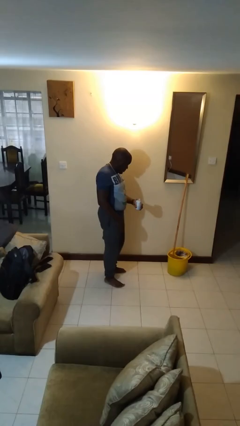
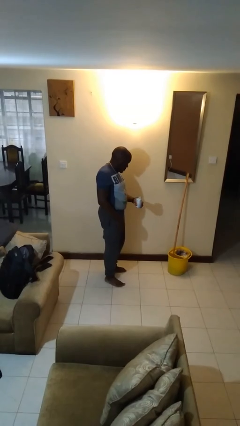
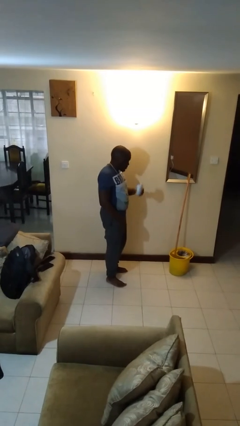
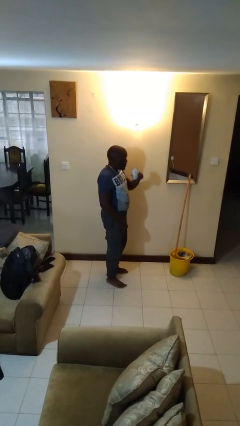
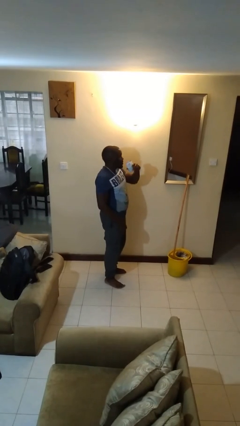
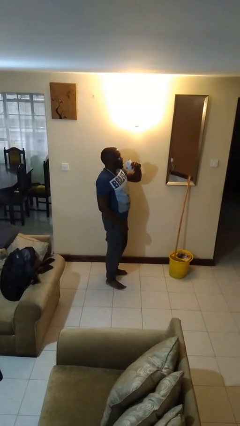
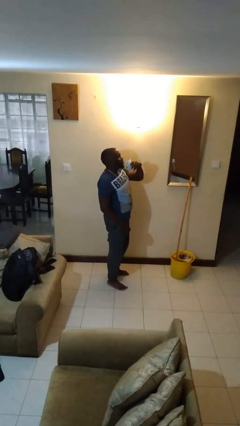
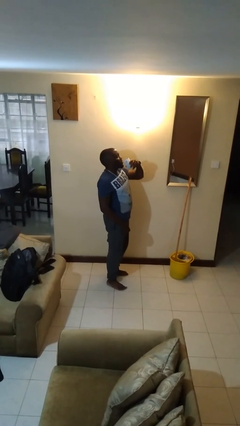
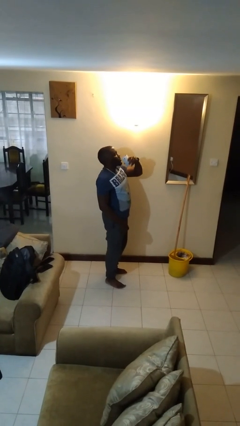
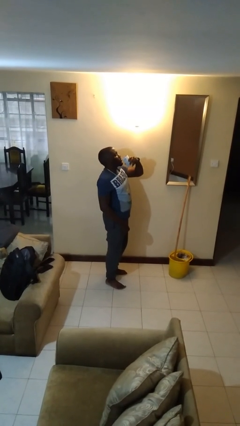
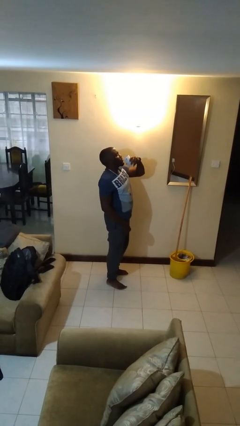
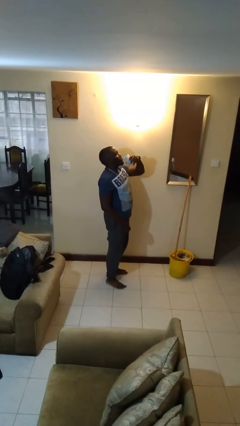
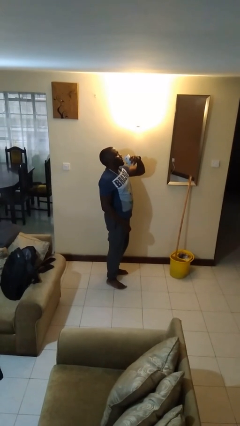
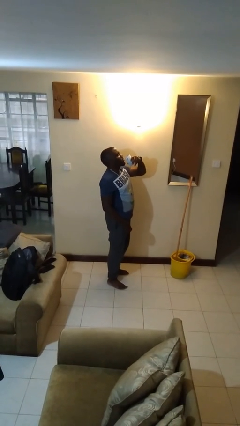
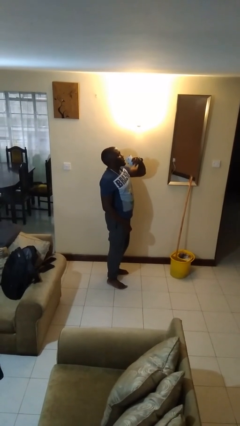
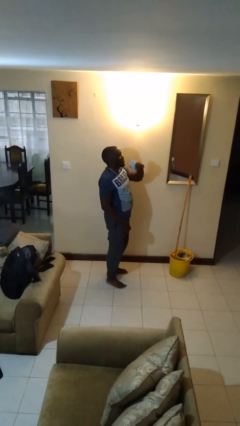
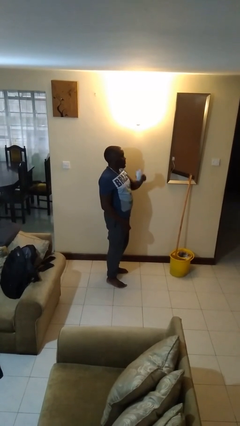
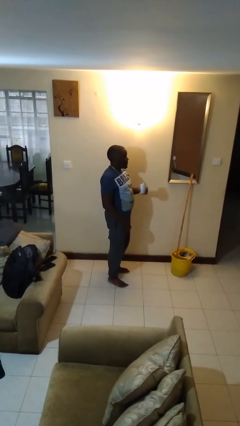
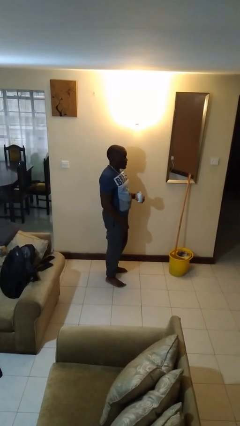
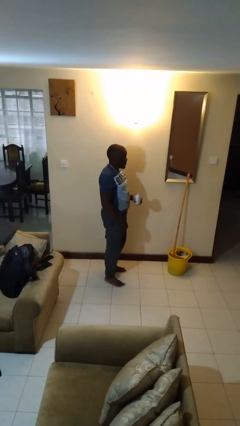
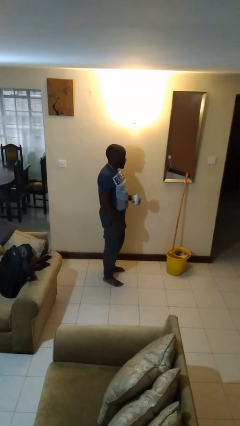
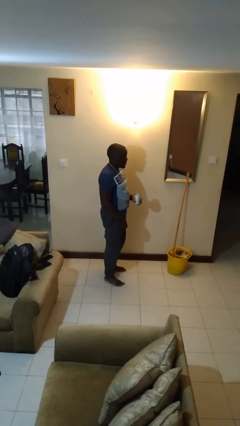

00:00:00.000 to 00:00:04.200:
person drinks from beverage can

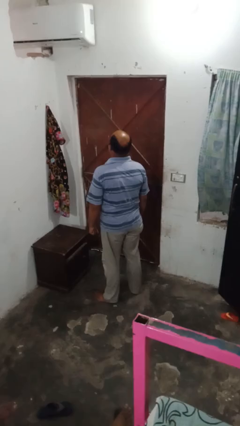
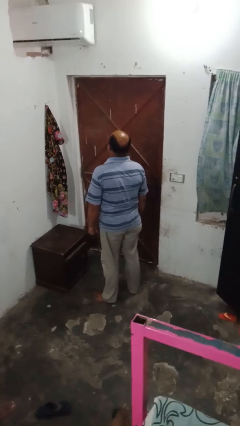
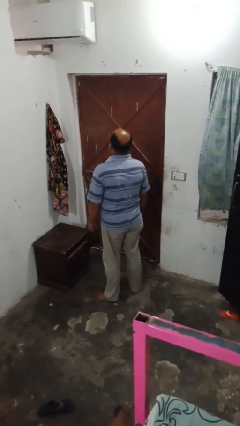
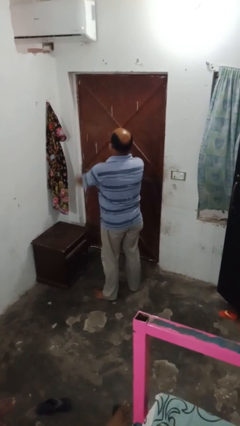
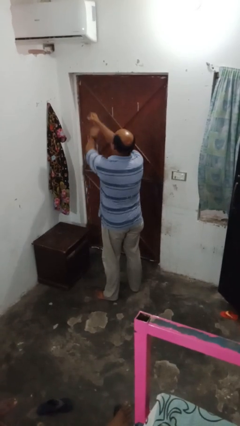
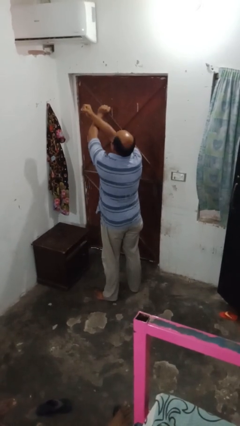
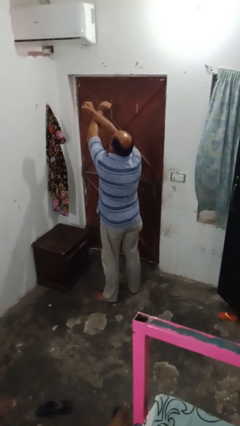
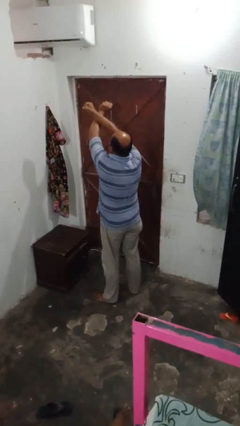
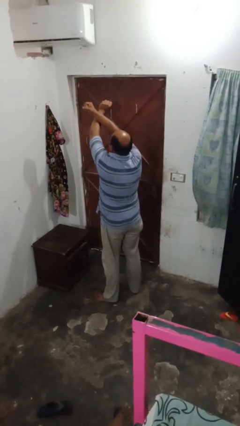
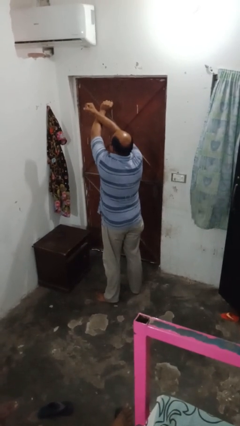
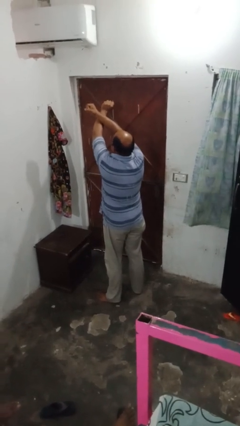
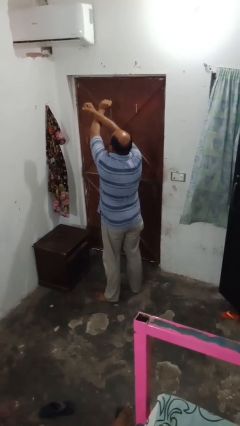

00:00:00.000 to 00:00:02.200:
person gestures arms x

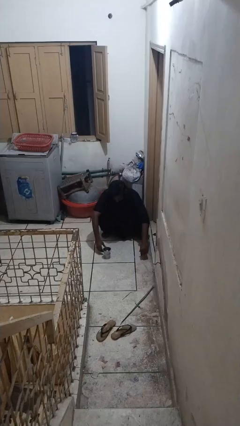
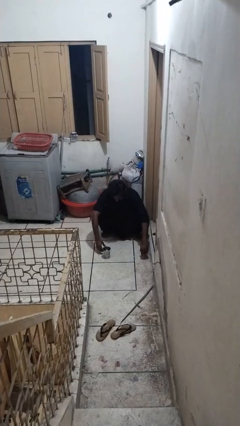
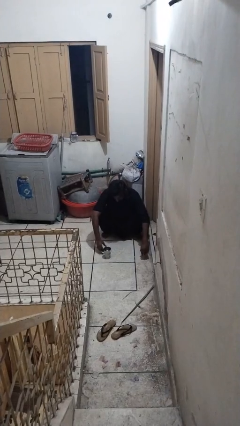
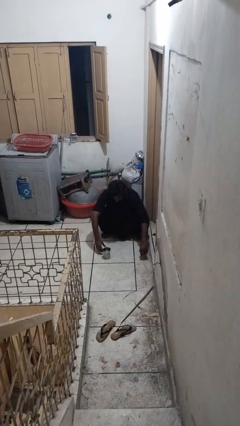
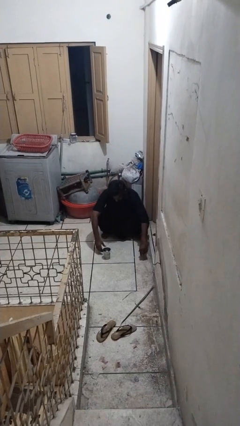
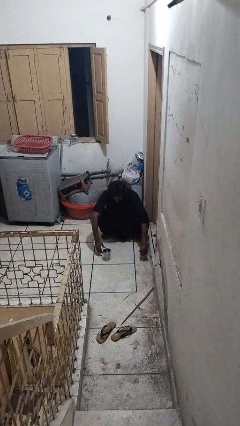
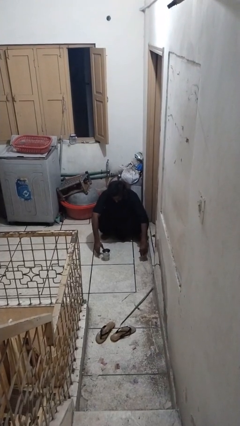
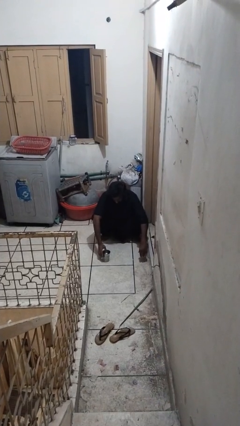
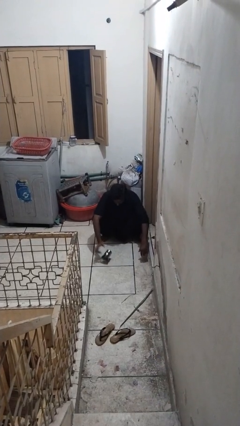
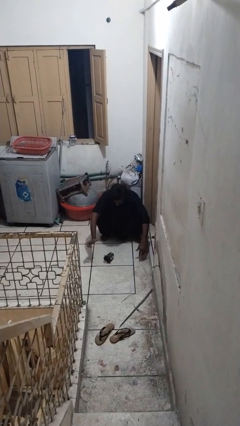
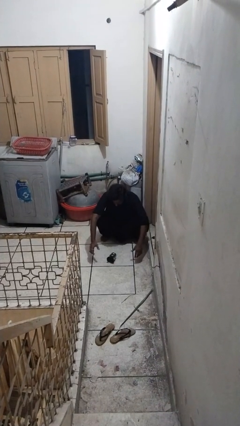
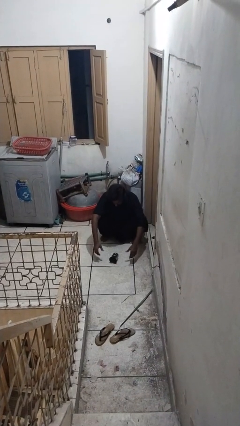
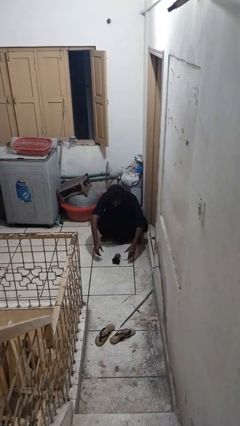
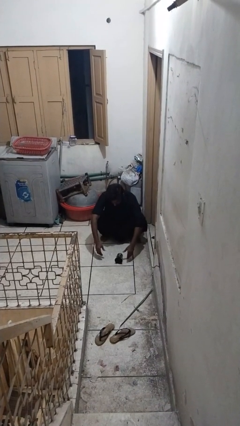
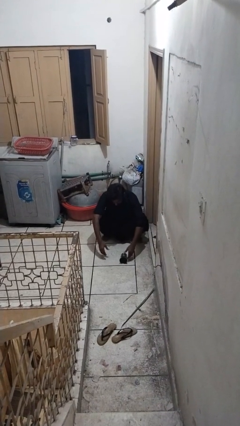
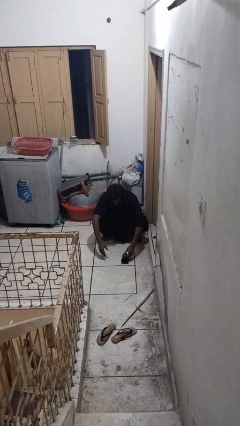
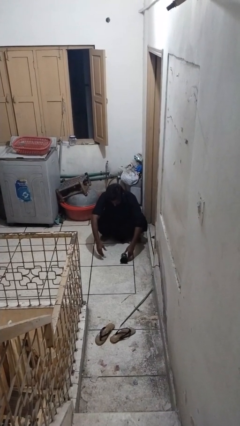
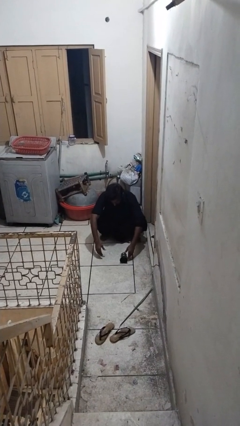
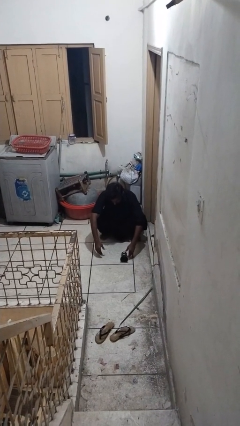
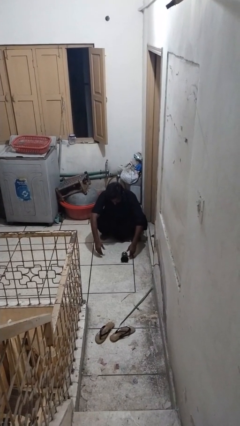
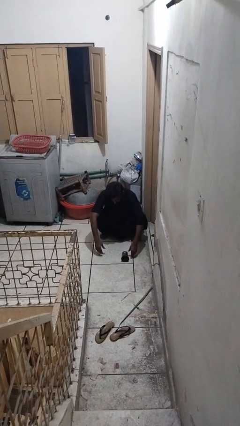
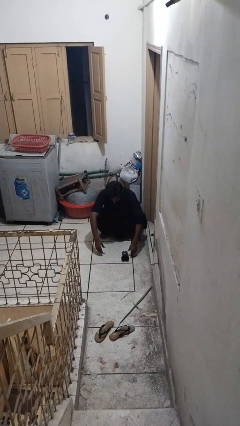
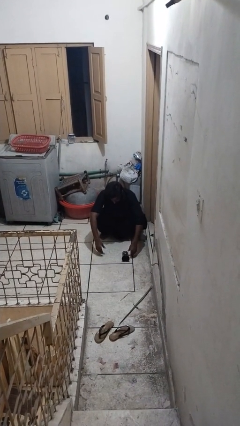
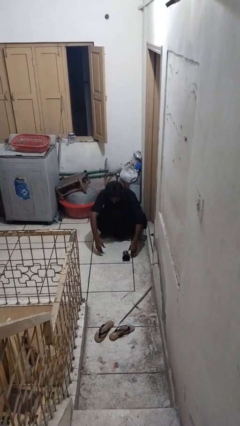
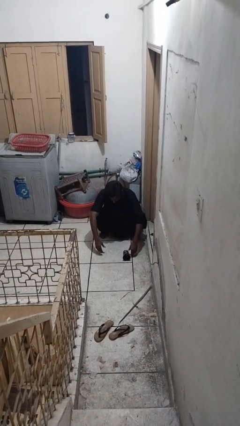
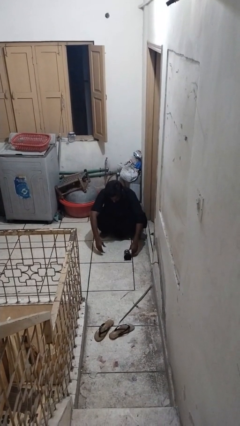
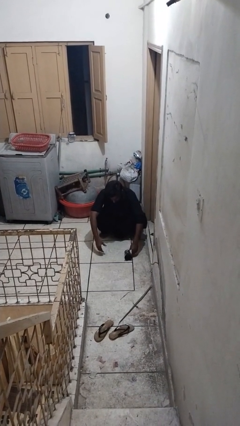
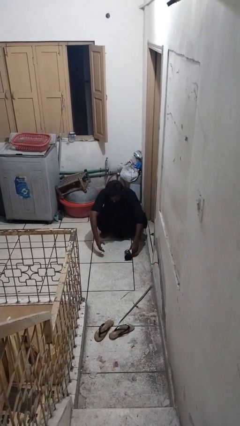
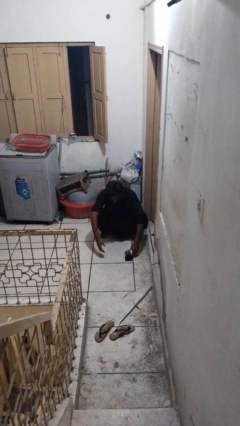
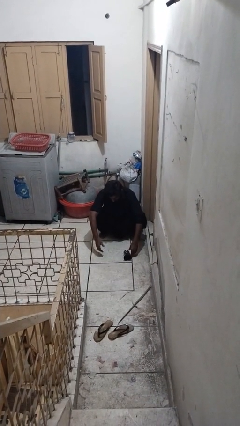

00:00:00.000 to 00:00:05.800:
person spills on floor

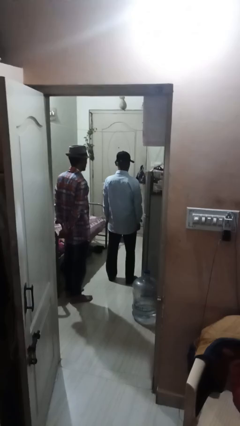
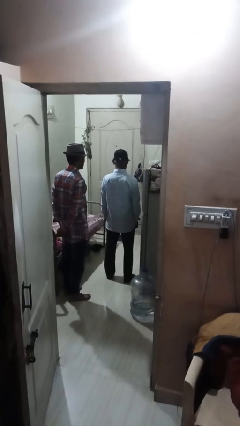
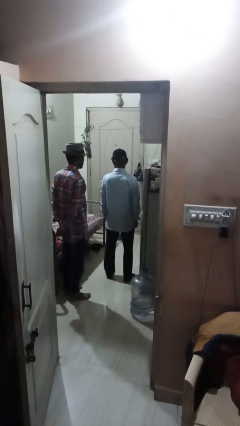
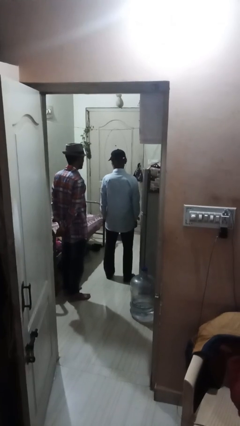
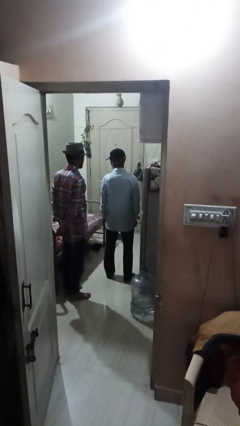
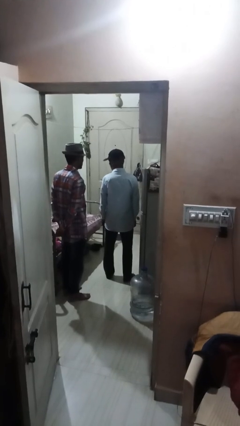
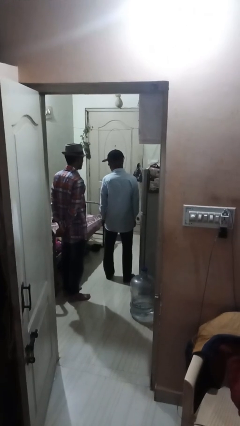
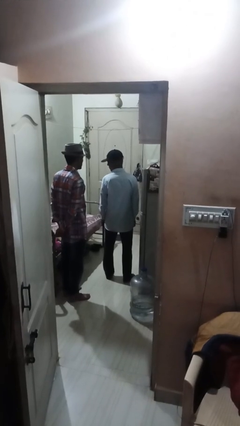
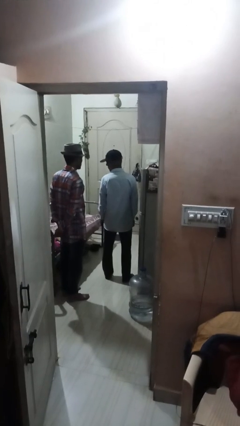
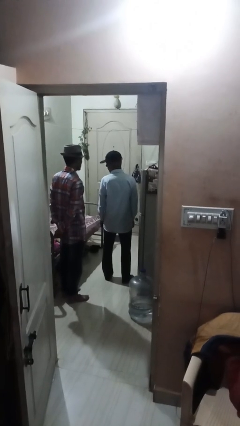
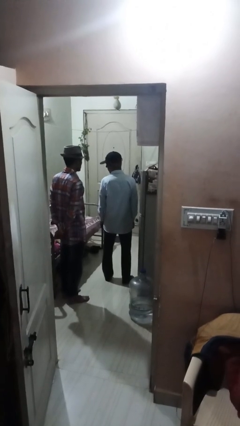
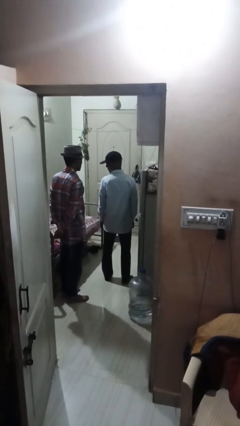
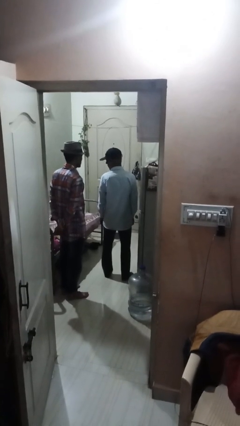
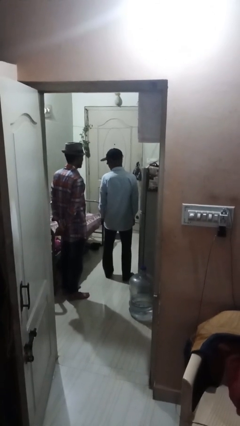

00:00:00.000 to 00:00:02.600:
person looks over shoulder

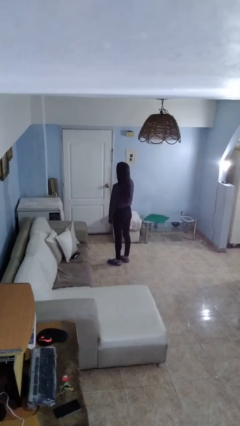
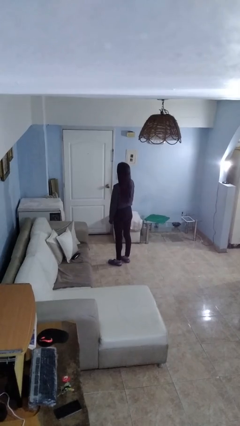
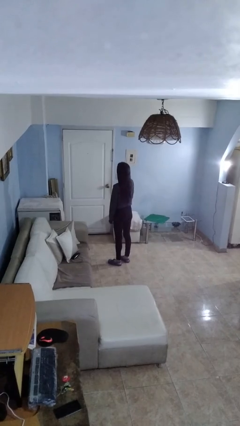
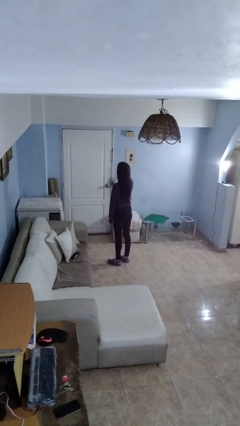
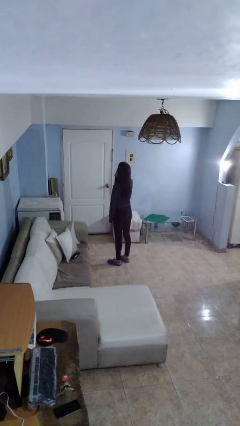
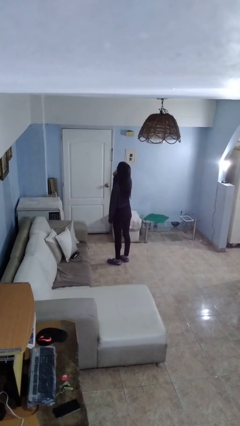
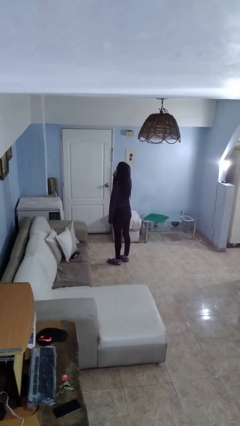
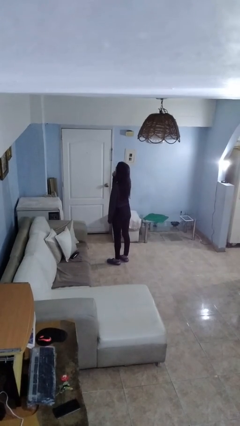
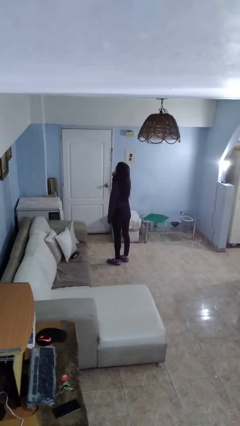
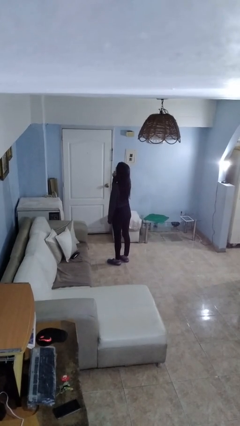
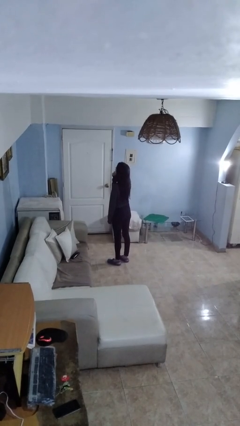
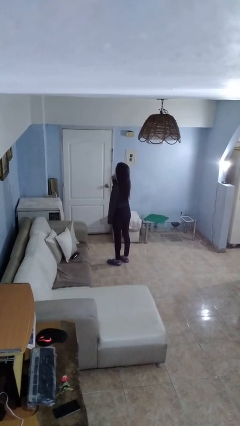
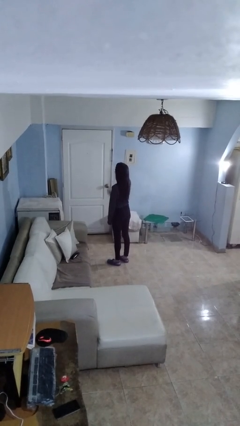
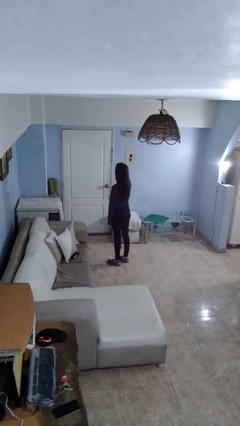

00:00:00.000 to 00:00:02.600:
person strokes chin

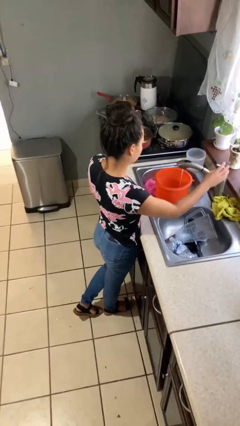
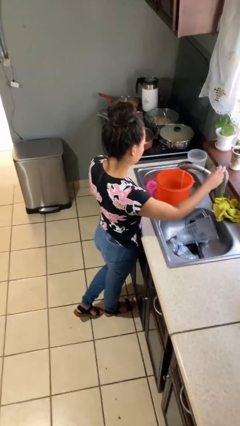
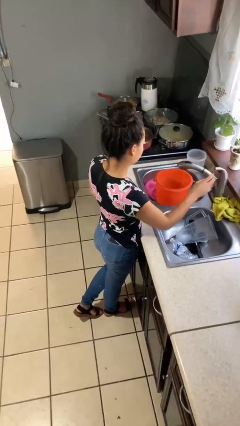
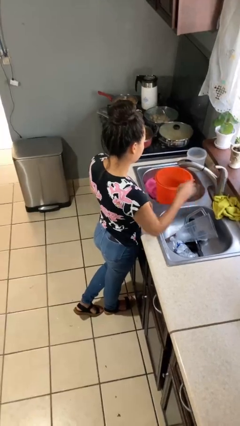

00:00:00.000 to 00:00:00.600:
person turns off faucet
